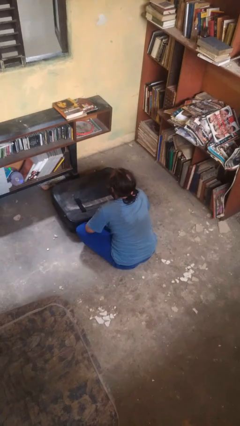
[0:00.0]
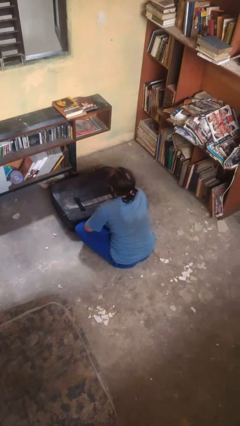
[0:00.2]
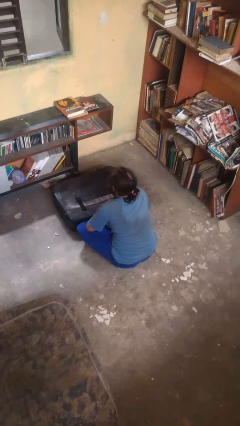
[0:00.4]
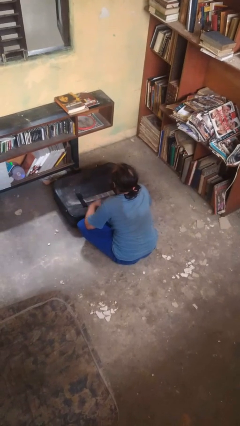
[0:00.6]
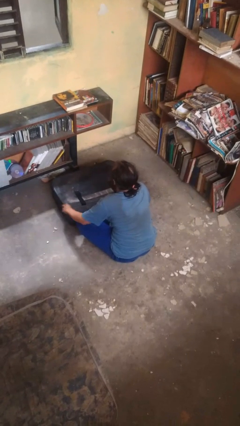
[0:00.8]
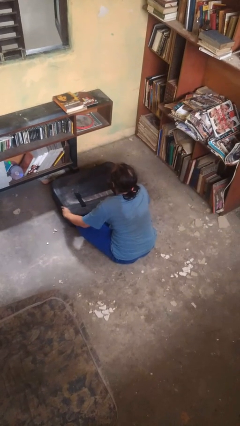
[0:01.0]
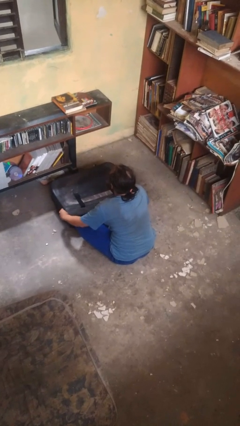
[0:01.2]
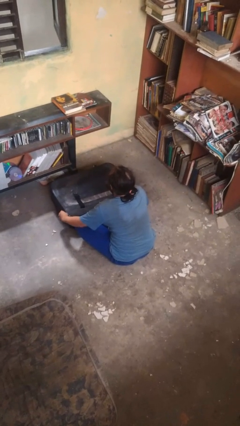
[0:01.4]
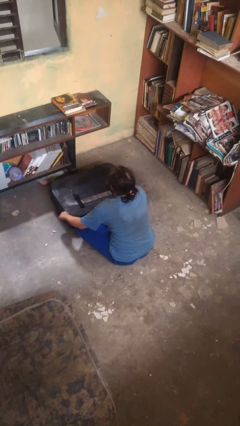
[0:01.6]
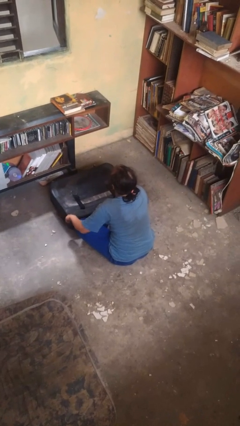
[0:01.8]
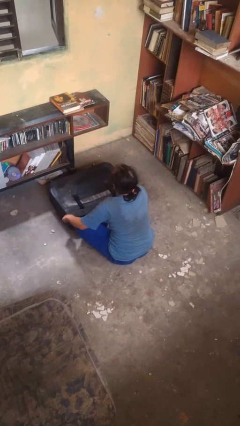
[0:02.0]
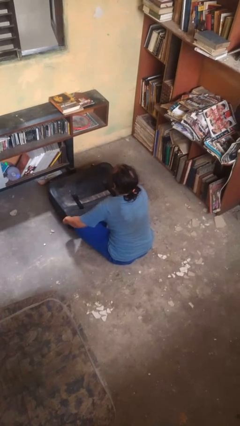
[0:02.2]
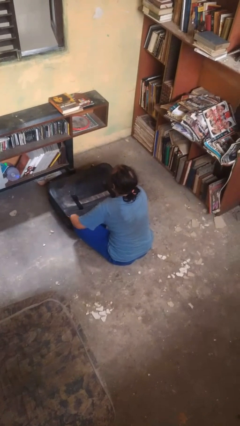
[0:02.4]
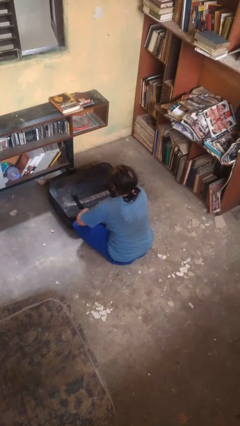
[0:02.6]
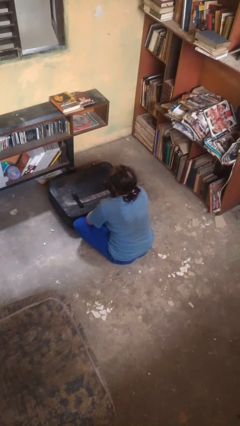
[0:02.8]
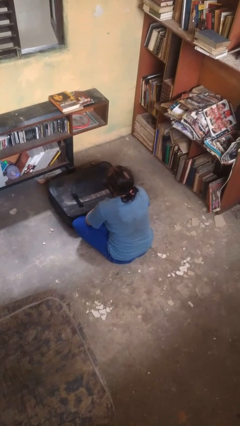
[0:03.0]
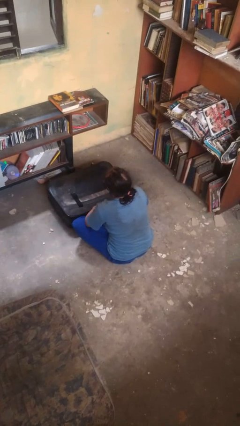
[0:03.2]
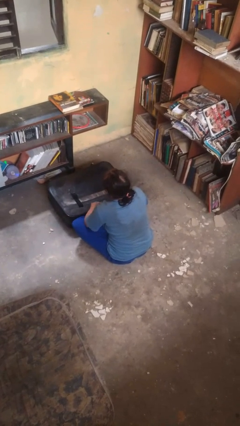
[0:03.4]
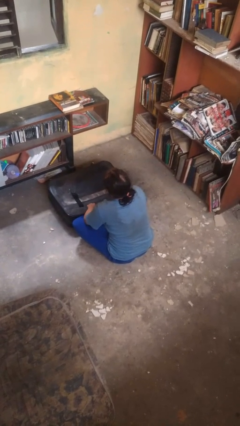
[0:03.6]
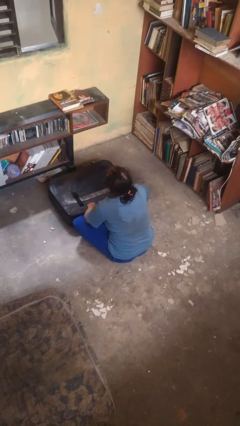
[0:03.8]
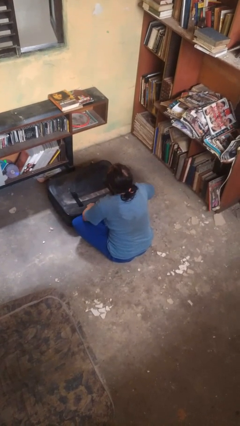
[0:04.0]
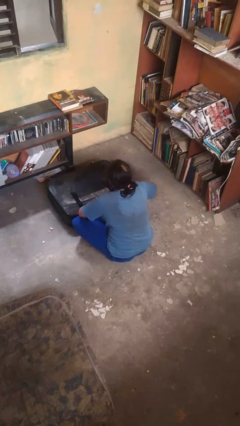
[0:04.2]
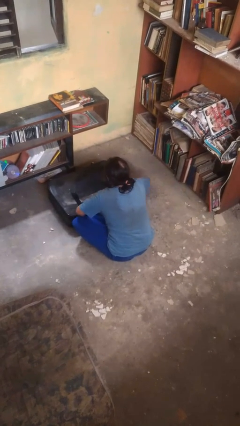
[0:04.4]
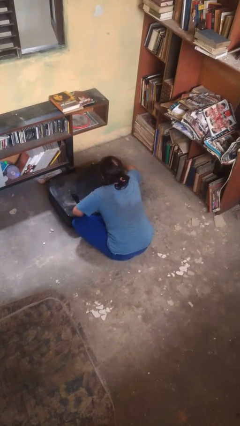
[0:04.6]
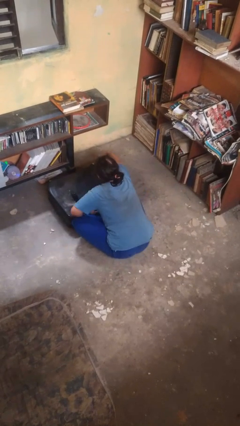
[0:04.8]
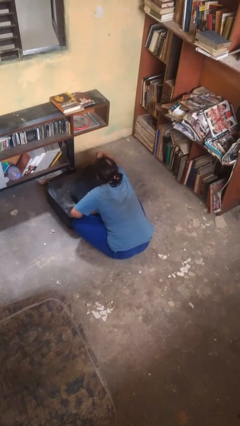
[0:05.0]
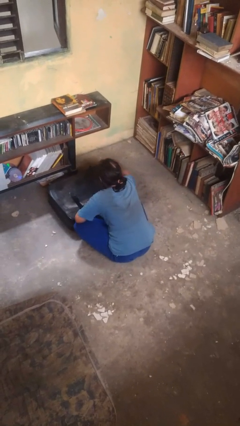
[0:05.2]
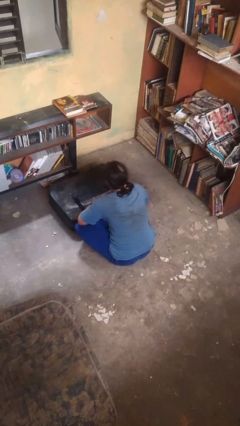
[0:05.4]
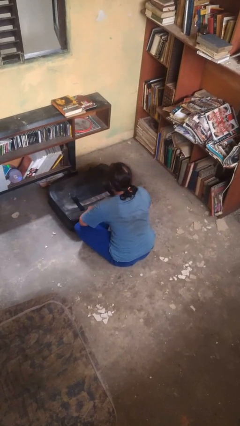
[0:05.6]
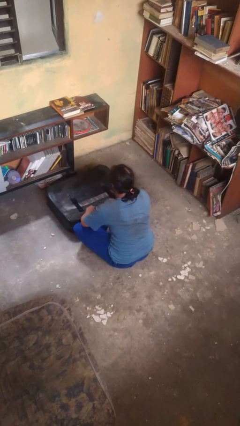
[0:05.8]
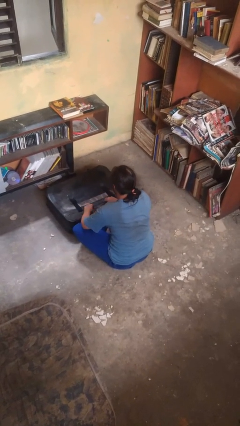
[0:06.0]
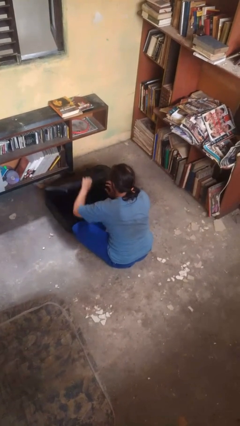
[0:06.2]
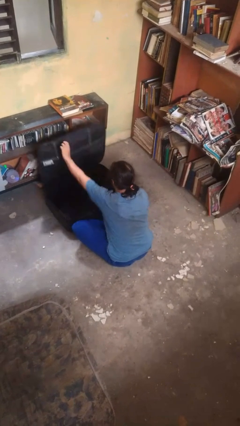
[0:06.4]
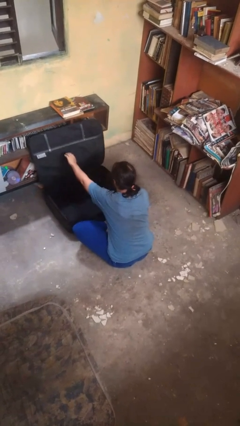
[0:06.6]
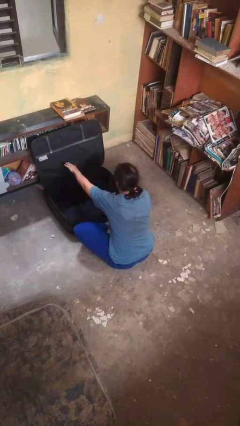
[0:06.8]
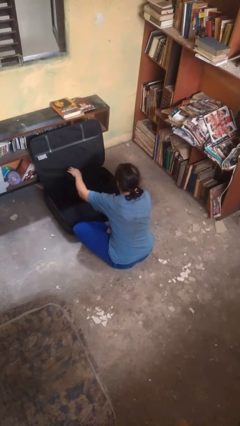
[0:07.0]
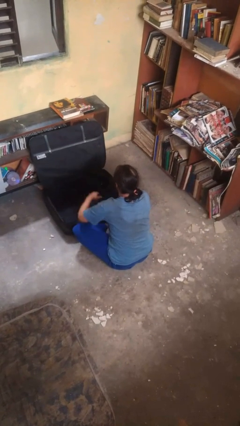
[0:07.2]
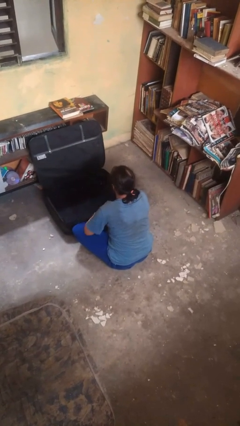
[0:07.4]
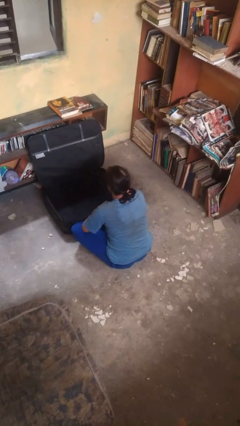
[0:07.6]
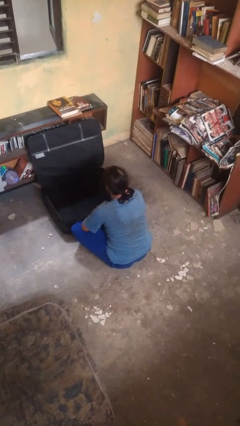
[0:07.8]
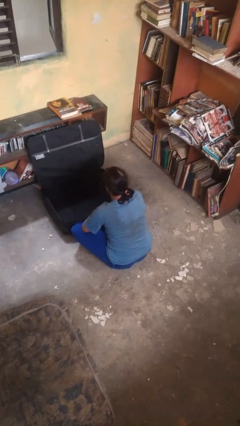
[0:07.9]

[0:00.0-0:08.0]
person opens suitcase

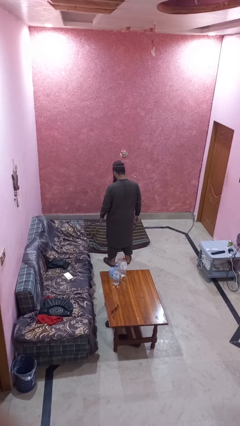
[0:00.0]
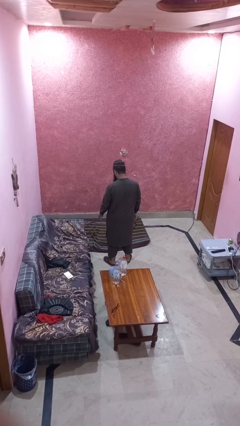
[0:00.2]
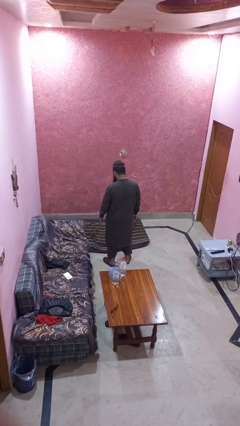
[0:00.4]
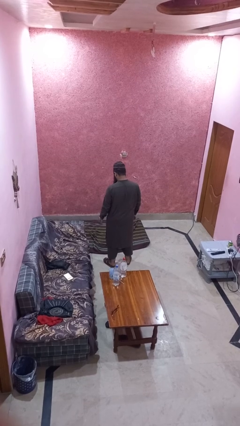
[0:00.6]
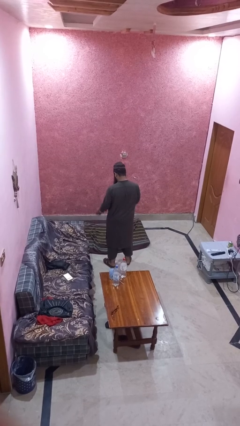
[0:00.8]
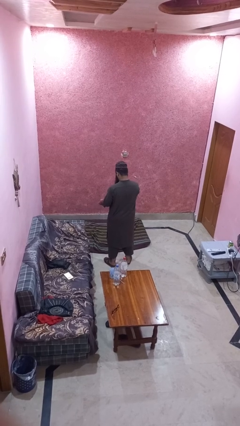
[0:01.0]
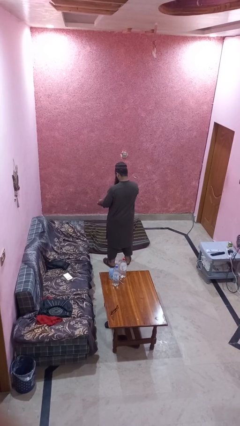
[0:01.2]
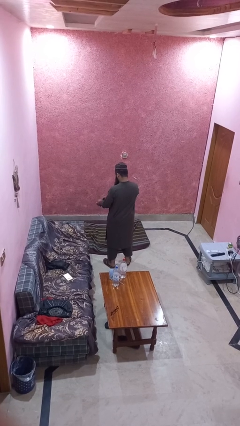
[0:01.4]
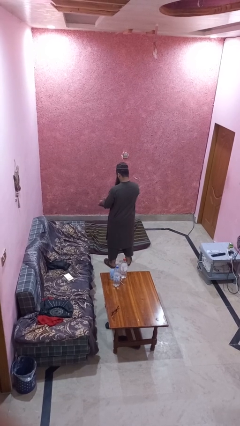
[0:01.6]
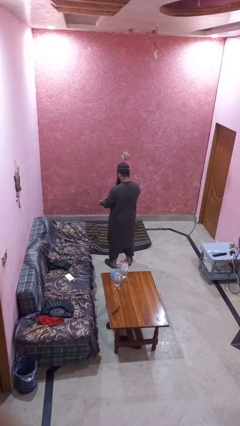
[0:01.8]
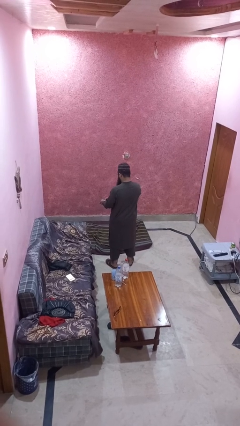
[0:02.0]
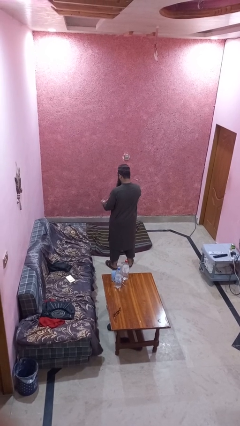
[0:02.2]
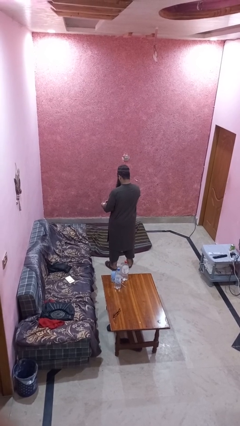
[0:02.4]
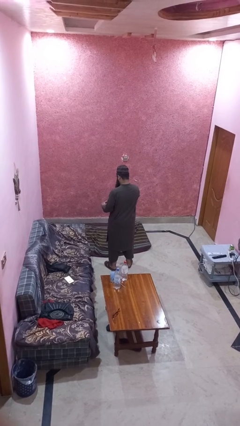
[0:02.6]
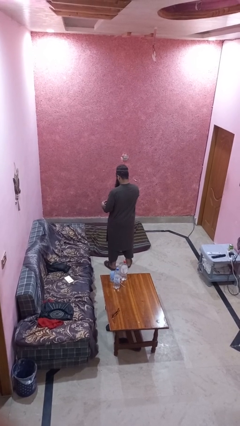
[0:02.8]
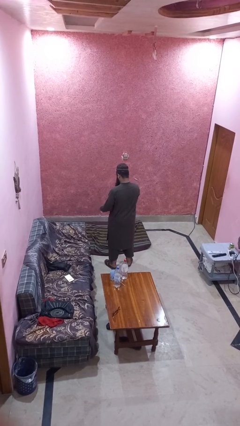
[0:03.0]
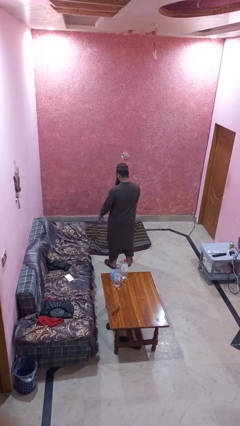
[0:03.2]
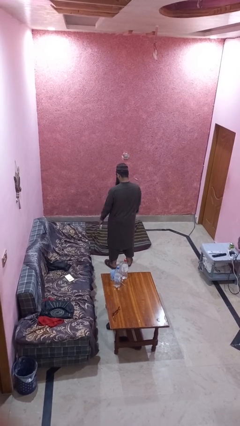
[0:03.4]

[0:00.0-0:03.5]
person takes off wristwatch

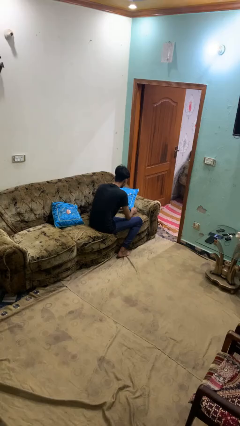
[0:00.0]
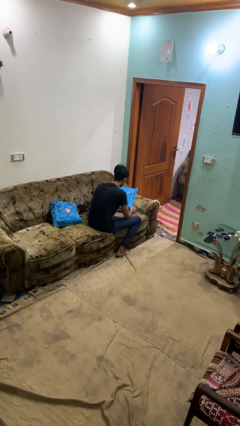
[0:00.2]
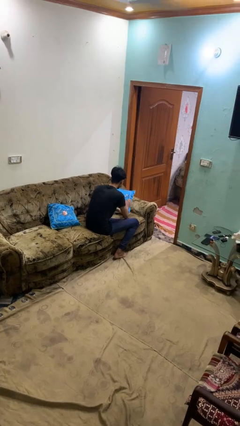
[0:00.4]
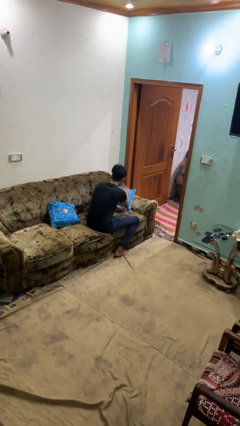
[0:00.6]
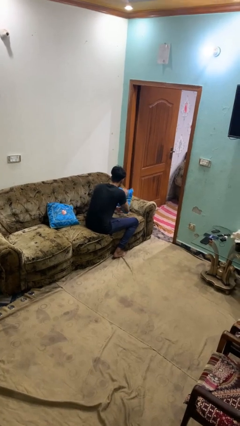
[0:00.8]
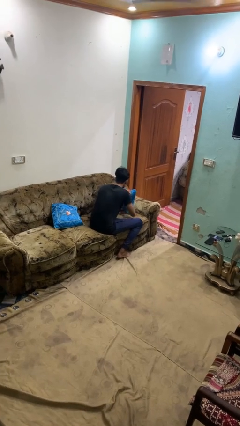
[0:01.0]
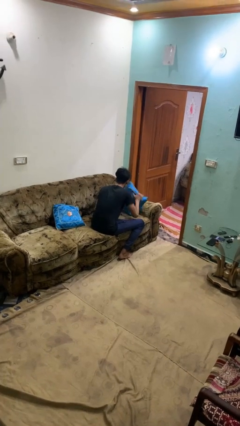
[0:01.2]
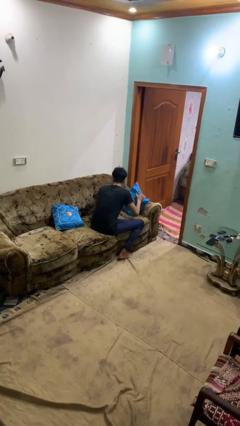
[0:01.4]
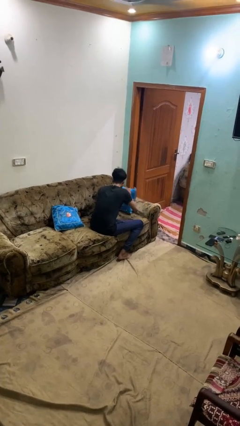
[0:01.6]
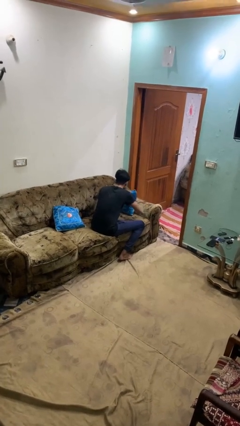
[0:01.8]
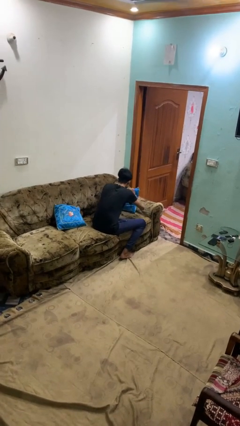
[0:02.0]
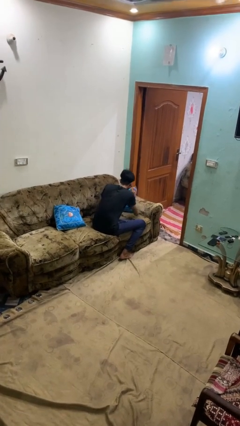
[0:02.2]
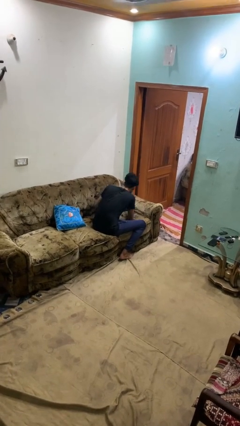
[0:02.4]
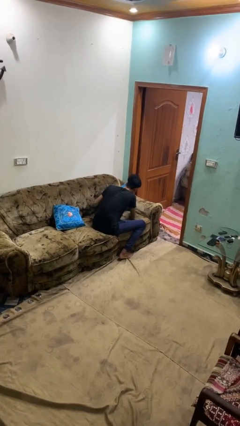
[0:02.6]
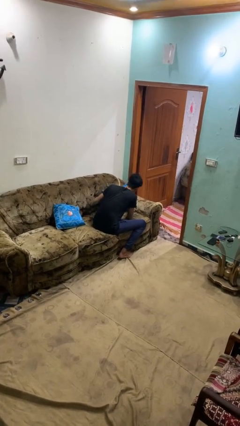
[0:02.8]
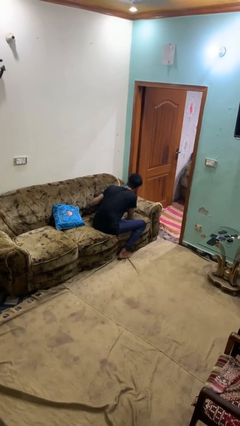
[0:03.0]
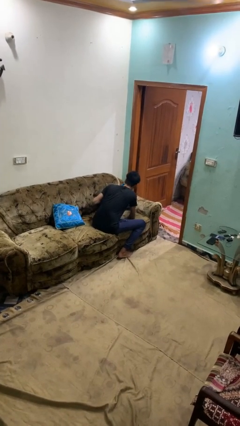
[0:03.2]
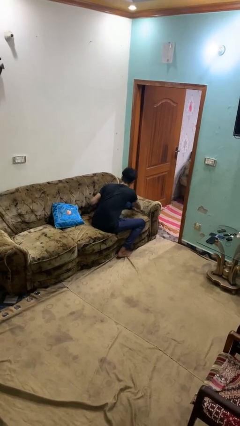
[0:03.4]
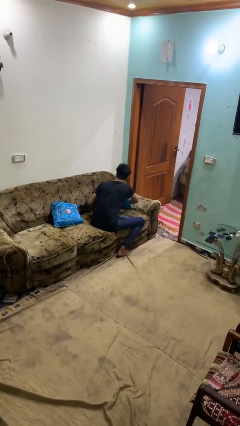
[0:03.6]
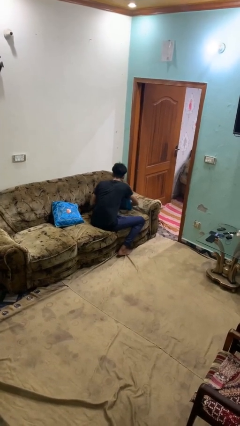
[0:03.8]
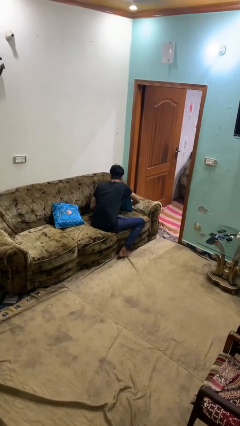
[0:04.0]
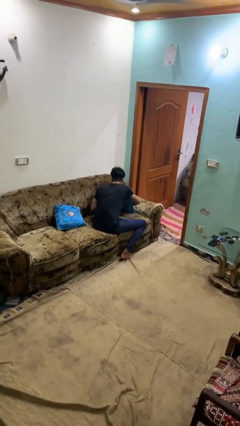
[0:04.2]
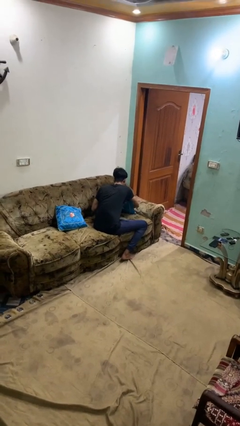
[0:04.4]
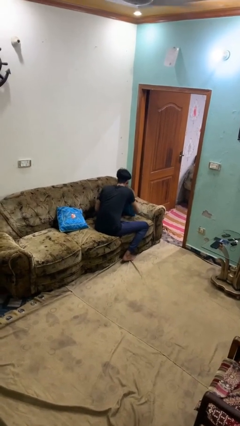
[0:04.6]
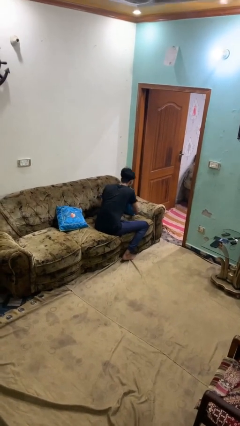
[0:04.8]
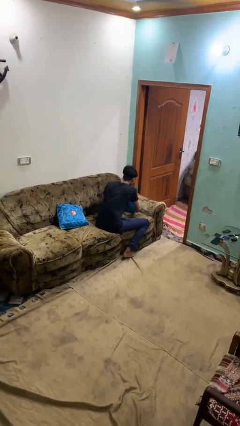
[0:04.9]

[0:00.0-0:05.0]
person searches in couch

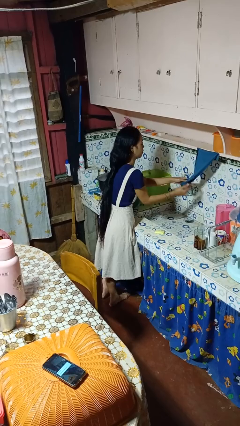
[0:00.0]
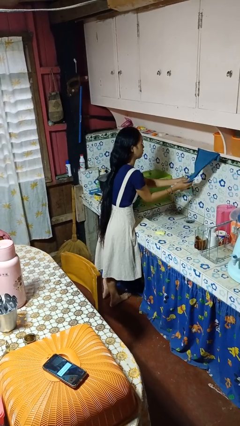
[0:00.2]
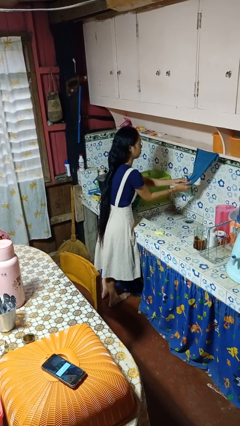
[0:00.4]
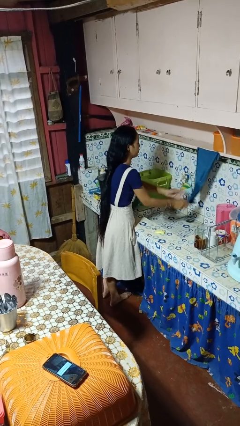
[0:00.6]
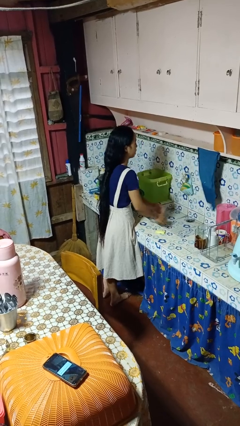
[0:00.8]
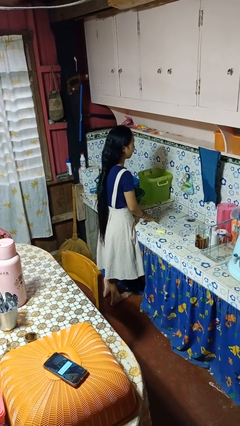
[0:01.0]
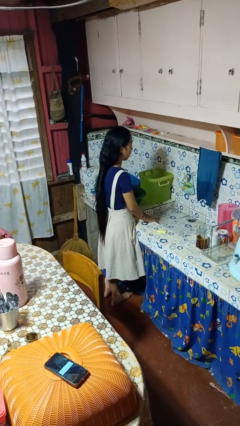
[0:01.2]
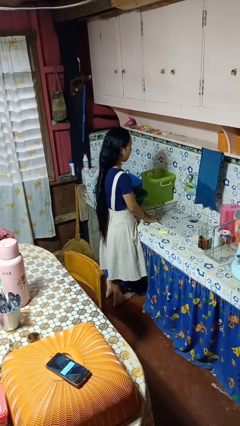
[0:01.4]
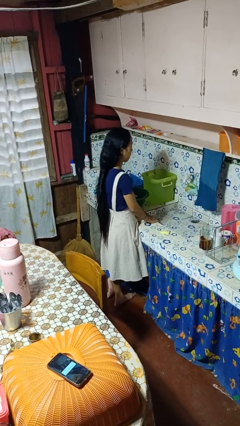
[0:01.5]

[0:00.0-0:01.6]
person dries hands with towel
